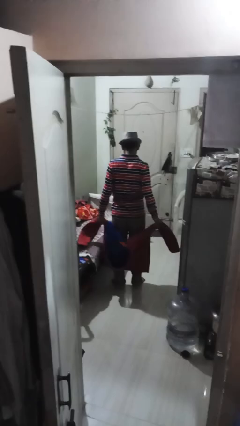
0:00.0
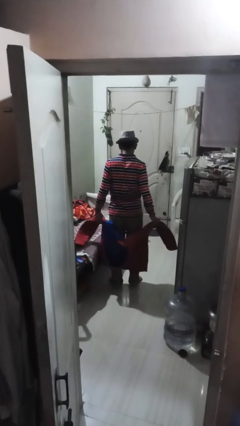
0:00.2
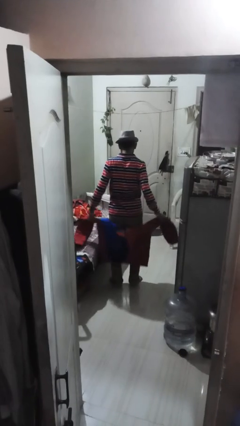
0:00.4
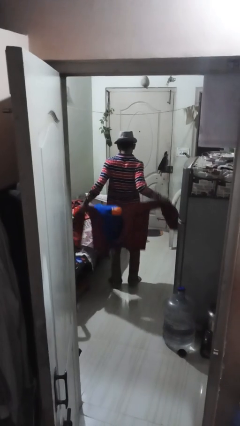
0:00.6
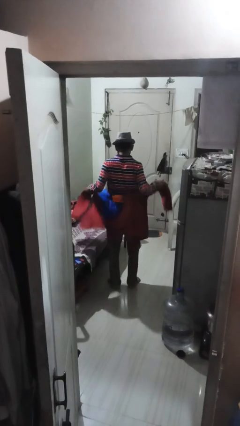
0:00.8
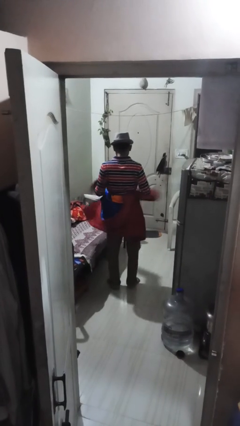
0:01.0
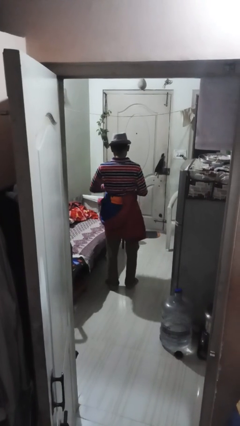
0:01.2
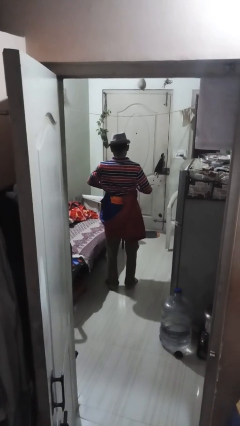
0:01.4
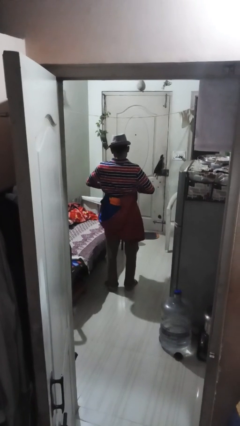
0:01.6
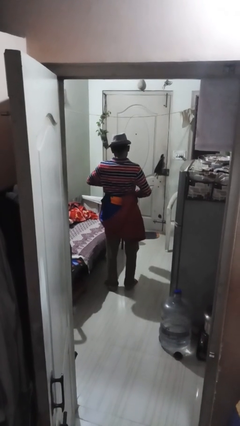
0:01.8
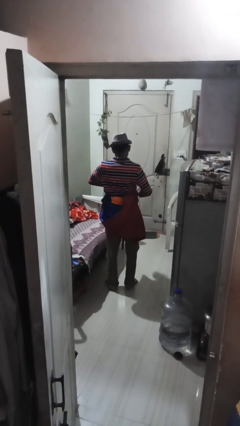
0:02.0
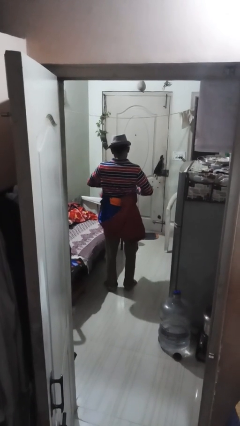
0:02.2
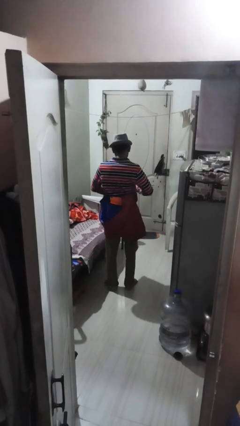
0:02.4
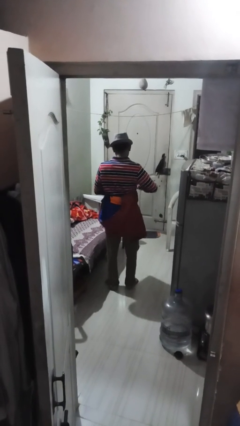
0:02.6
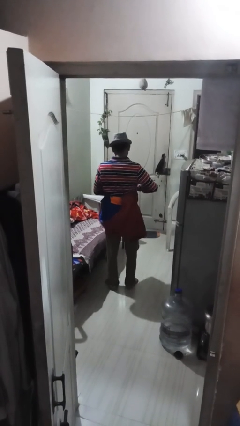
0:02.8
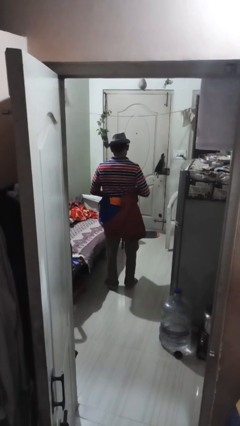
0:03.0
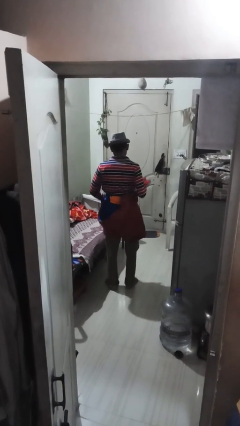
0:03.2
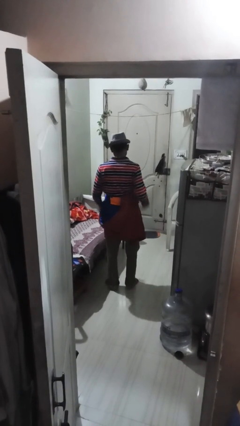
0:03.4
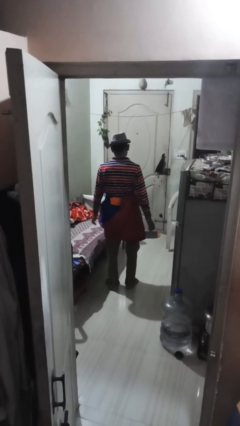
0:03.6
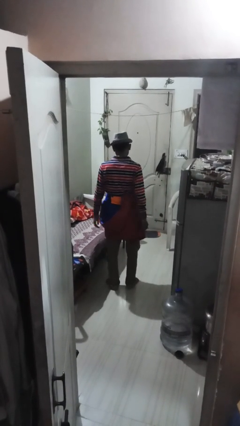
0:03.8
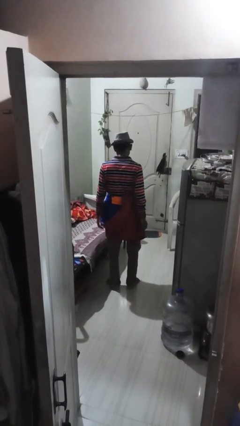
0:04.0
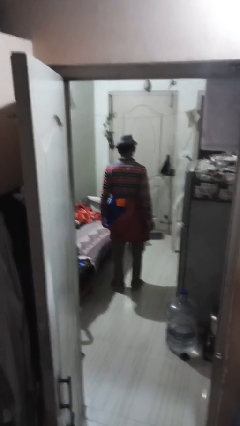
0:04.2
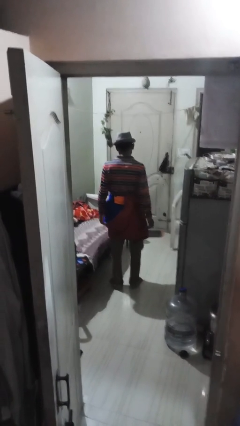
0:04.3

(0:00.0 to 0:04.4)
person ties jacket around waist

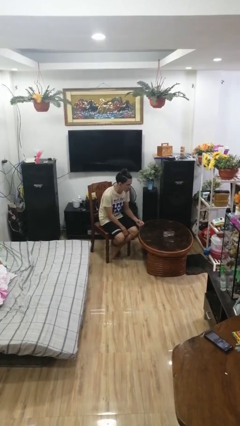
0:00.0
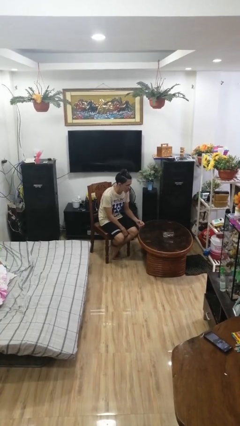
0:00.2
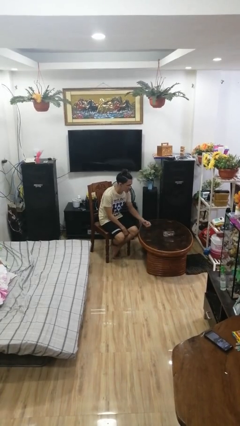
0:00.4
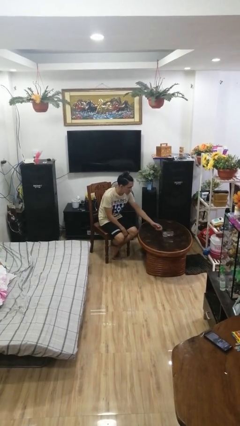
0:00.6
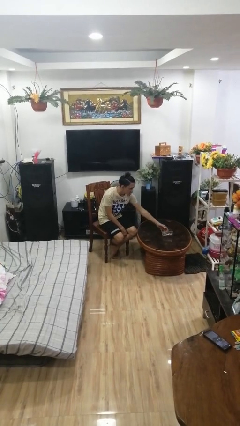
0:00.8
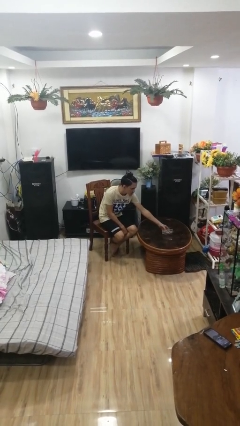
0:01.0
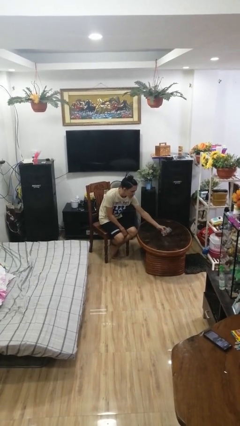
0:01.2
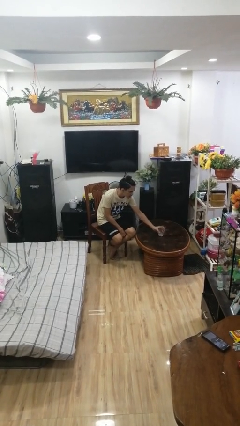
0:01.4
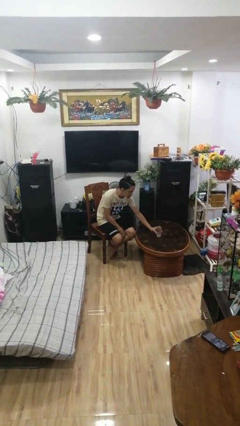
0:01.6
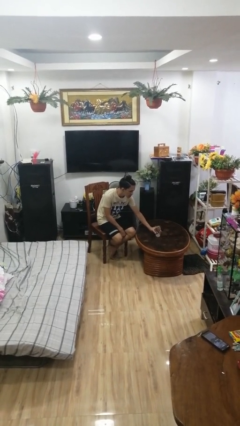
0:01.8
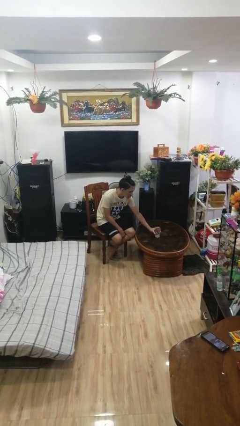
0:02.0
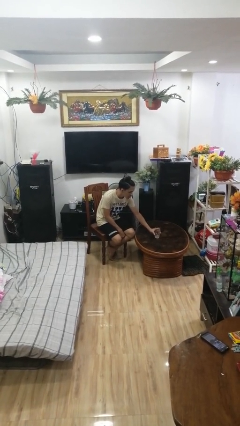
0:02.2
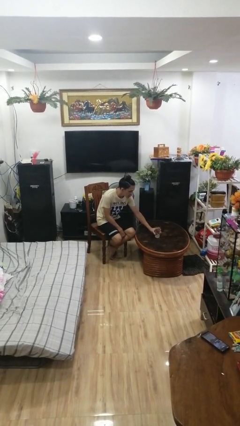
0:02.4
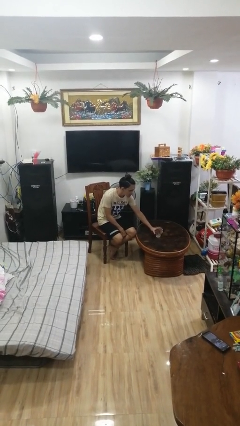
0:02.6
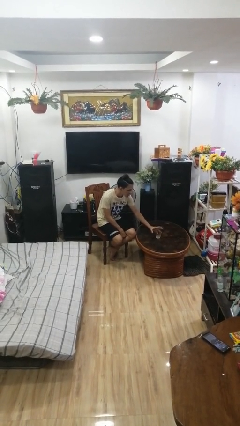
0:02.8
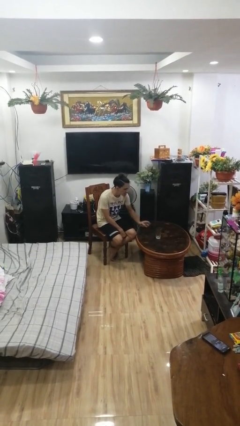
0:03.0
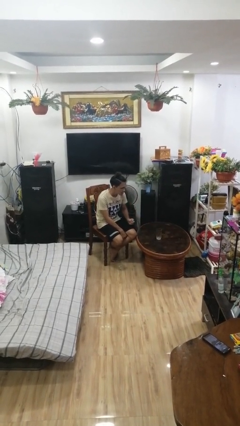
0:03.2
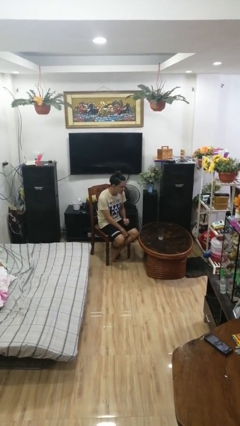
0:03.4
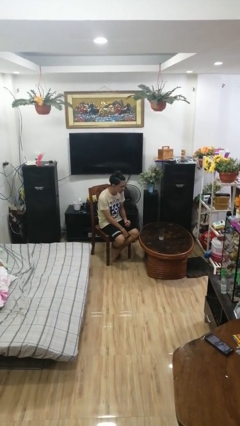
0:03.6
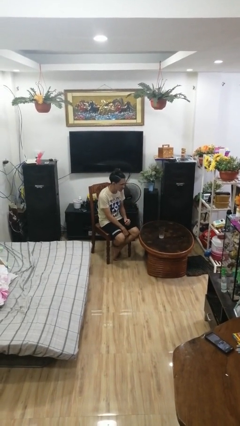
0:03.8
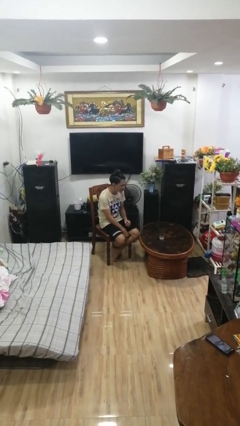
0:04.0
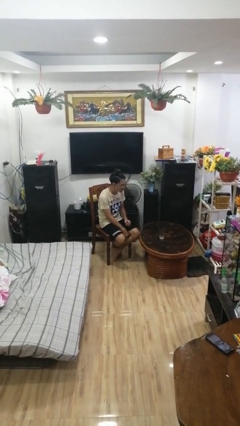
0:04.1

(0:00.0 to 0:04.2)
person sets upright glass

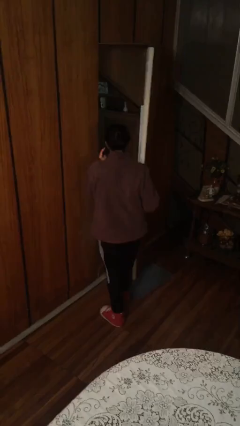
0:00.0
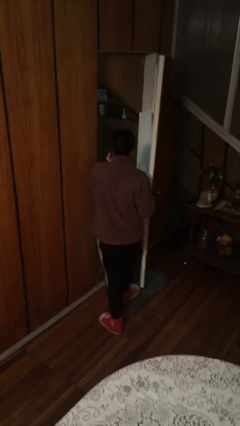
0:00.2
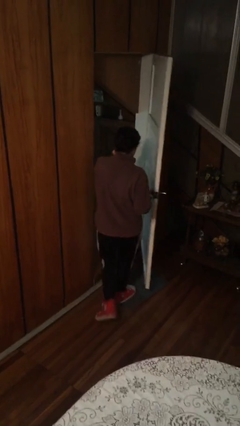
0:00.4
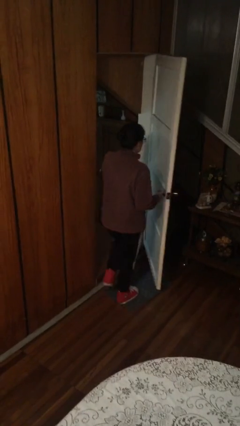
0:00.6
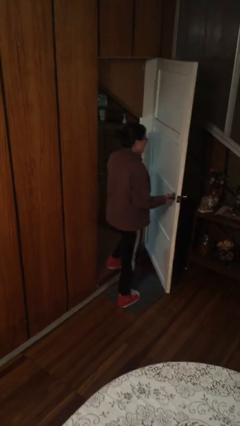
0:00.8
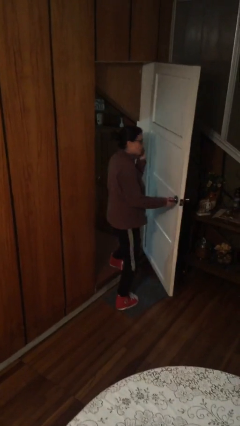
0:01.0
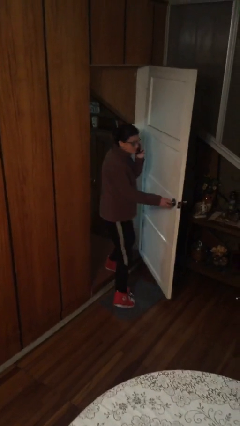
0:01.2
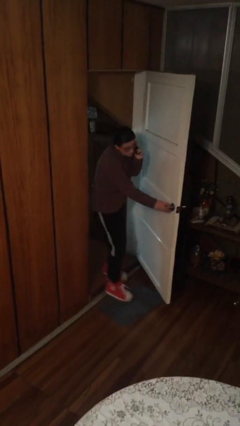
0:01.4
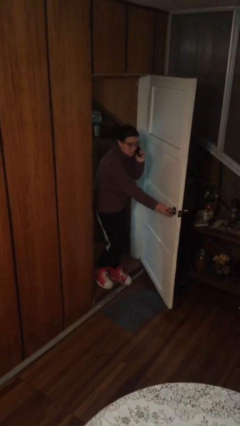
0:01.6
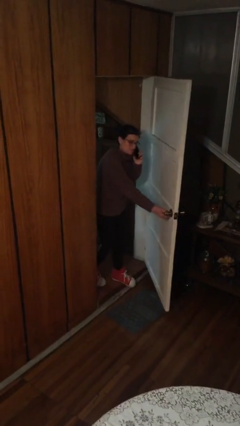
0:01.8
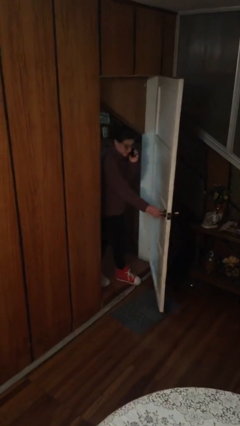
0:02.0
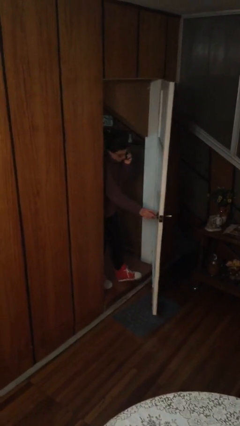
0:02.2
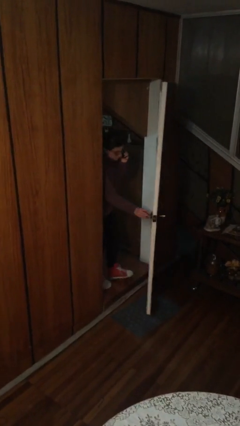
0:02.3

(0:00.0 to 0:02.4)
person exits scene through structure

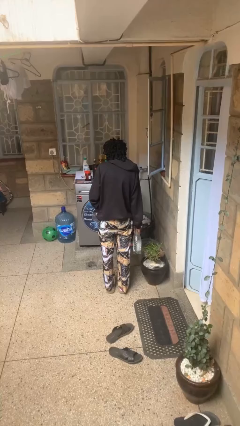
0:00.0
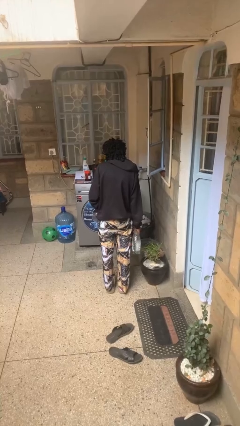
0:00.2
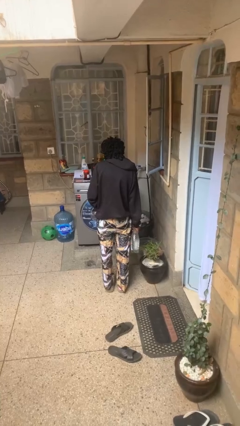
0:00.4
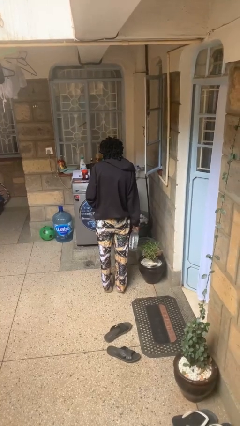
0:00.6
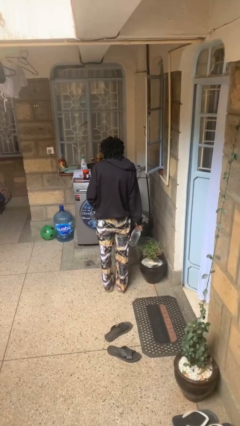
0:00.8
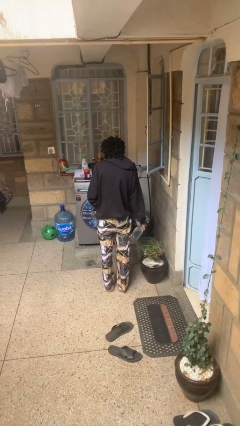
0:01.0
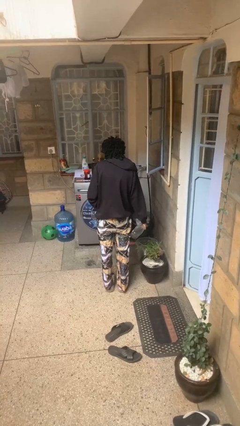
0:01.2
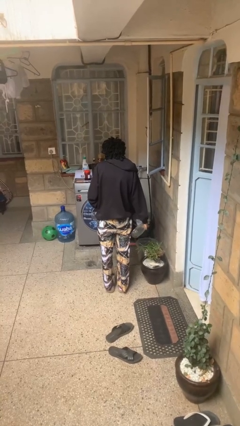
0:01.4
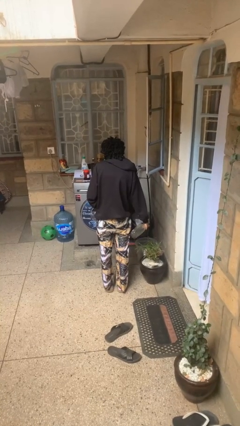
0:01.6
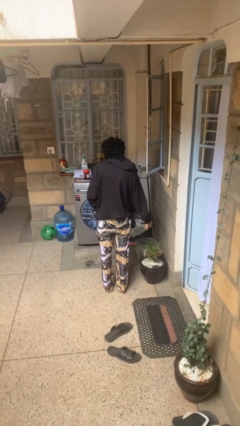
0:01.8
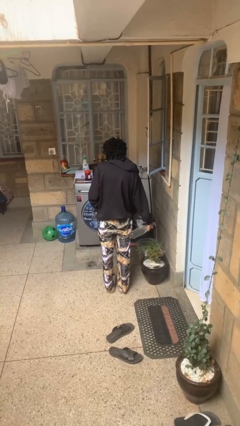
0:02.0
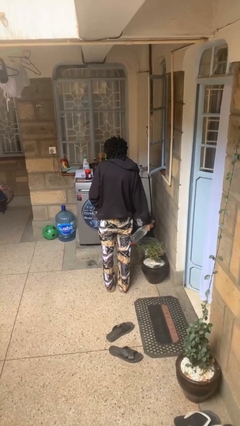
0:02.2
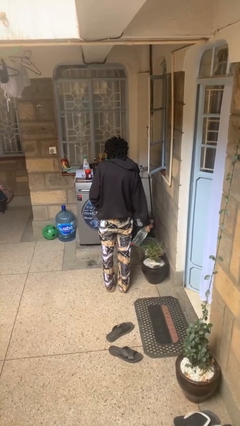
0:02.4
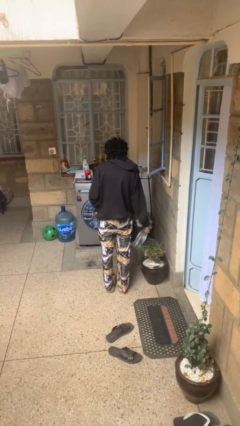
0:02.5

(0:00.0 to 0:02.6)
person waters houseplant

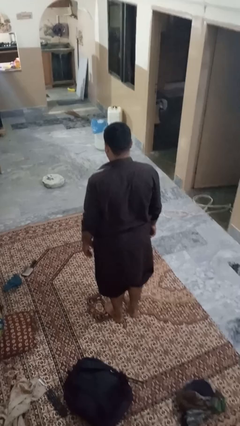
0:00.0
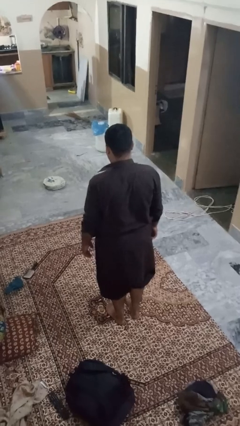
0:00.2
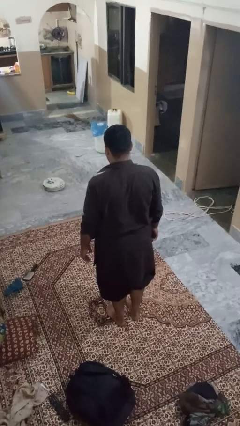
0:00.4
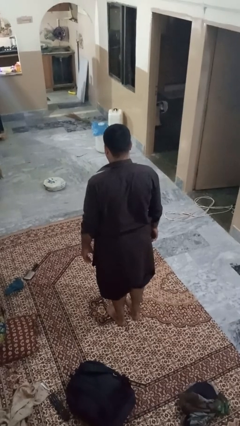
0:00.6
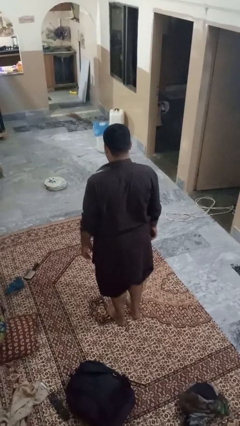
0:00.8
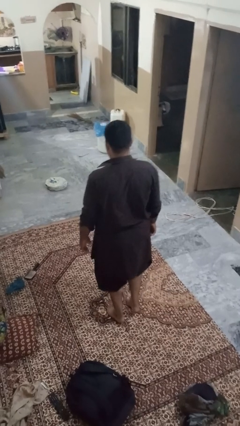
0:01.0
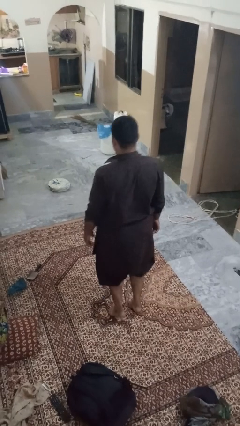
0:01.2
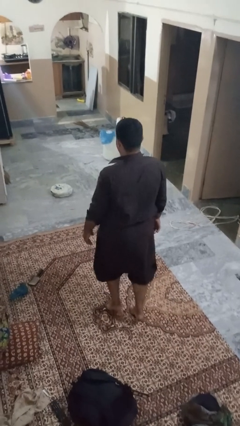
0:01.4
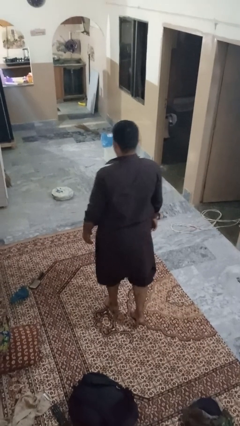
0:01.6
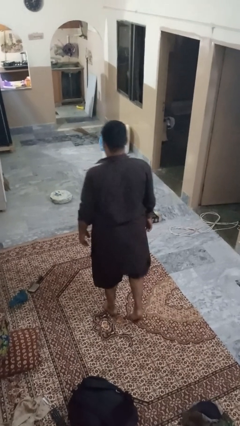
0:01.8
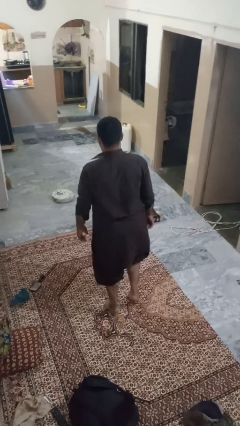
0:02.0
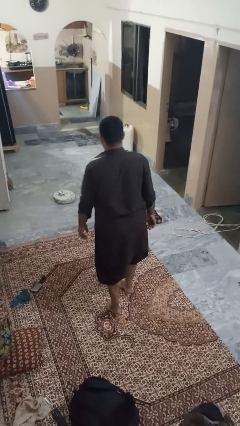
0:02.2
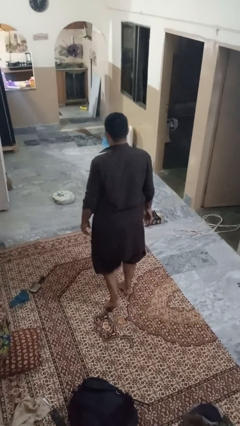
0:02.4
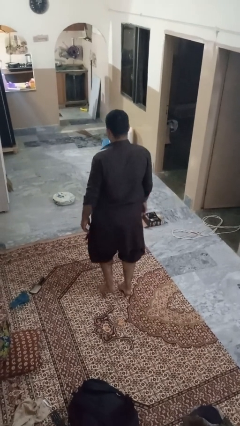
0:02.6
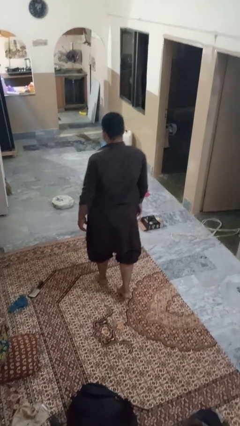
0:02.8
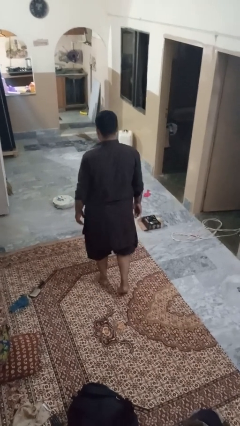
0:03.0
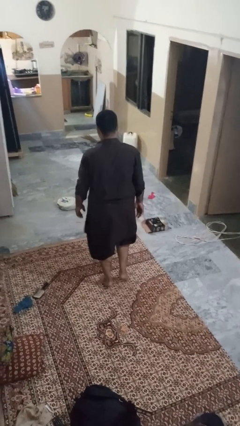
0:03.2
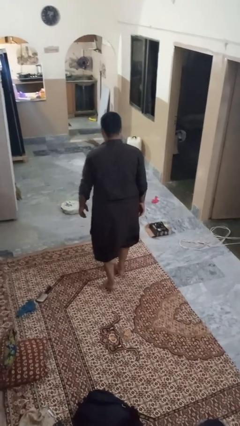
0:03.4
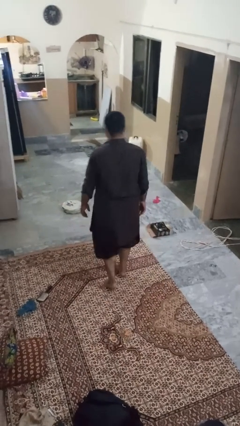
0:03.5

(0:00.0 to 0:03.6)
person walks tiptoe
